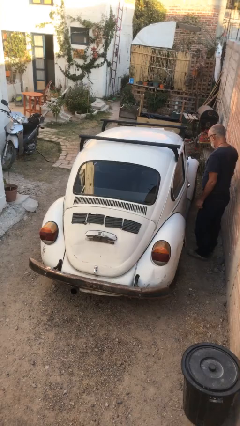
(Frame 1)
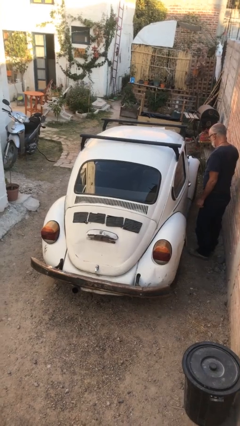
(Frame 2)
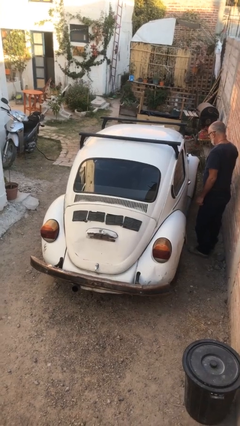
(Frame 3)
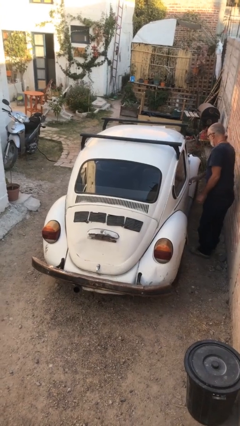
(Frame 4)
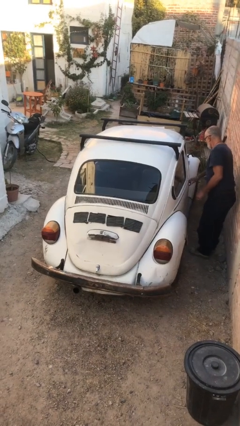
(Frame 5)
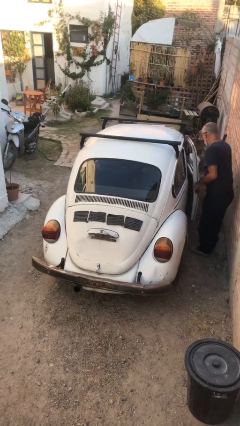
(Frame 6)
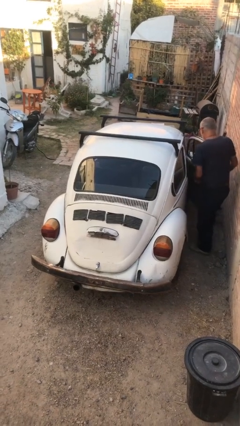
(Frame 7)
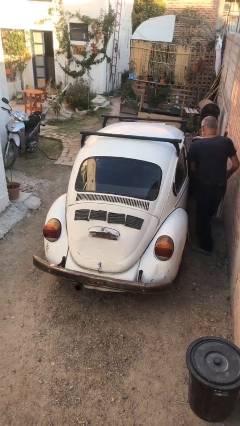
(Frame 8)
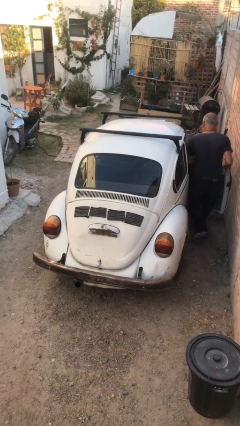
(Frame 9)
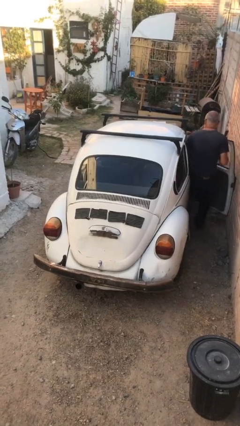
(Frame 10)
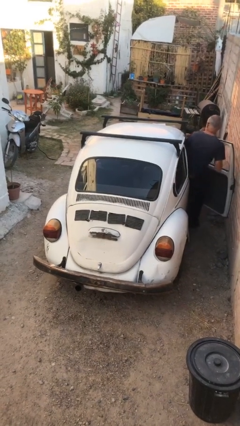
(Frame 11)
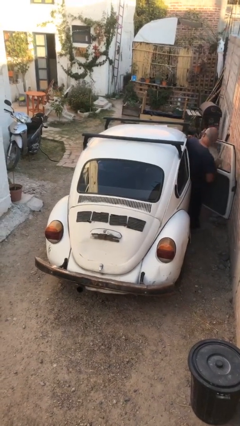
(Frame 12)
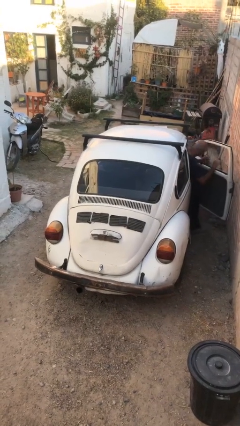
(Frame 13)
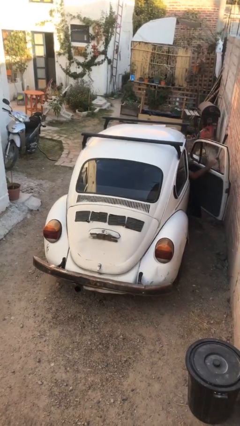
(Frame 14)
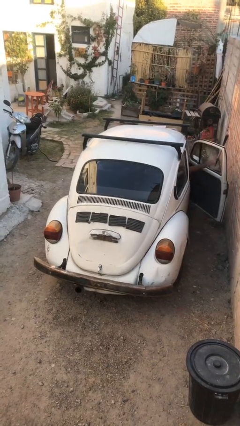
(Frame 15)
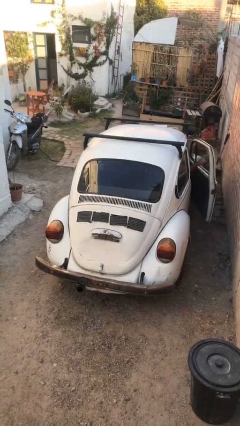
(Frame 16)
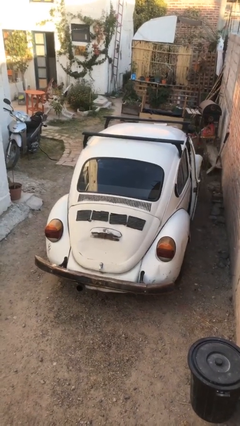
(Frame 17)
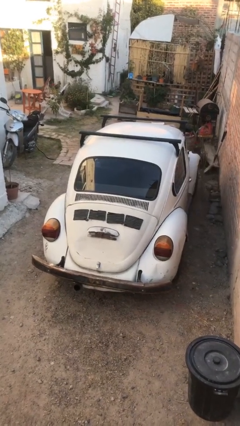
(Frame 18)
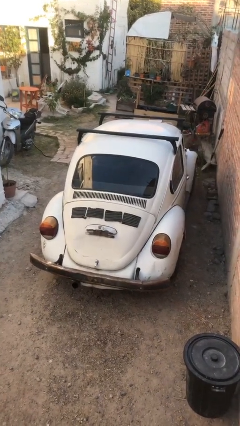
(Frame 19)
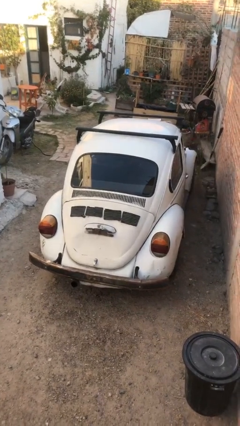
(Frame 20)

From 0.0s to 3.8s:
car picks up person

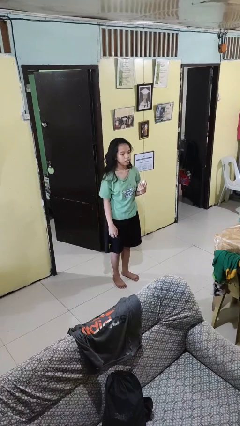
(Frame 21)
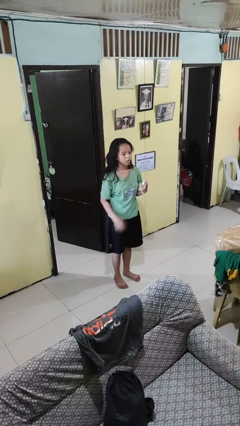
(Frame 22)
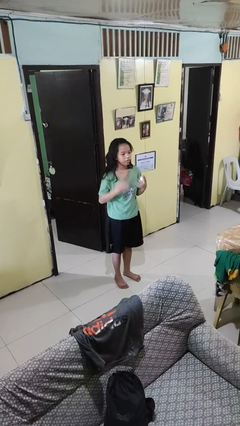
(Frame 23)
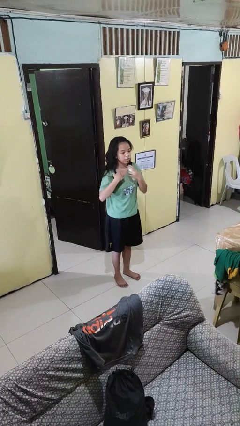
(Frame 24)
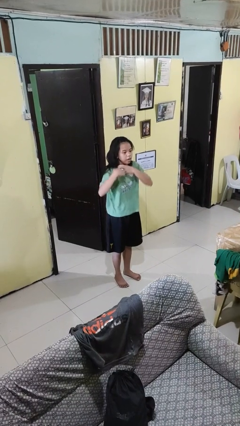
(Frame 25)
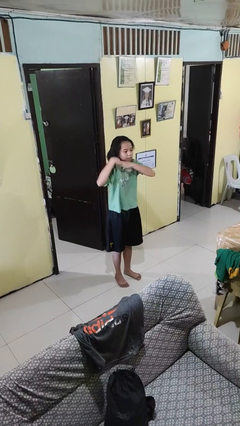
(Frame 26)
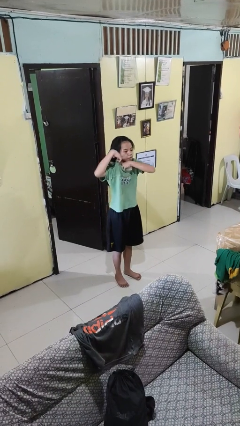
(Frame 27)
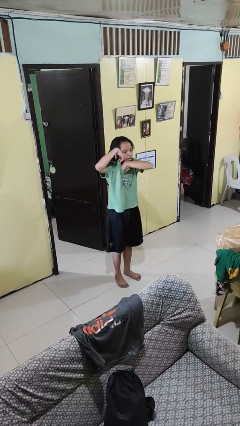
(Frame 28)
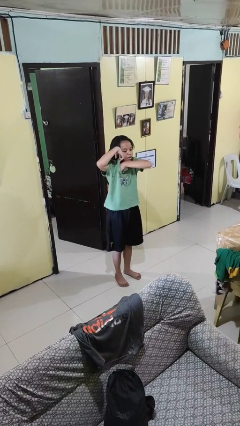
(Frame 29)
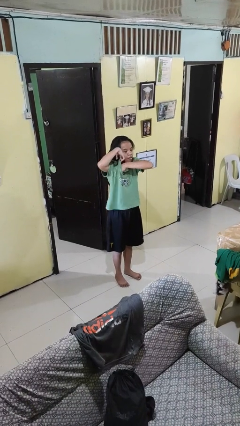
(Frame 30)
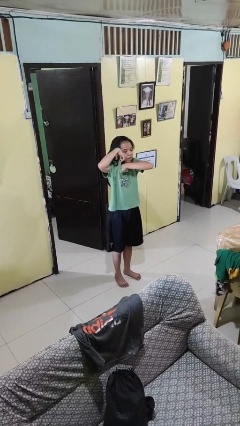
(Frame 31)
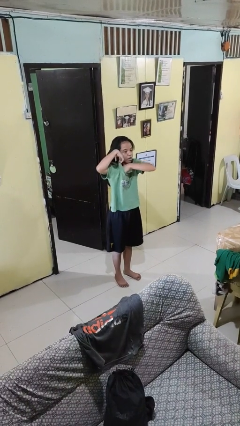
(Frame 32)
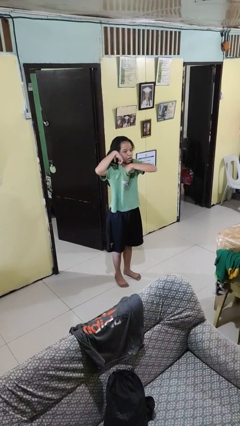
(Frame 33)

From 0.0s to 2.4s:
person applies deodorant

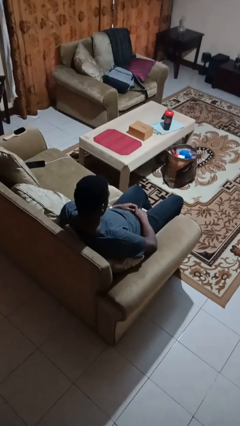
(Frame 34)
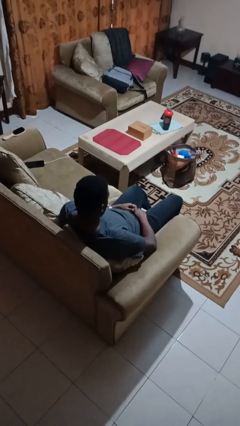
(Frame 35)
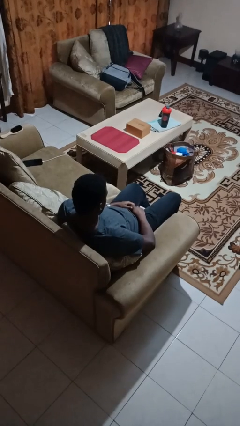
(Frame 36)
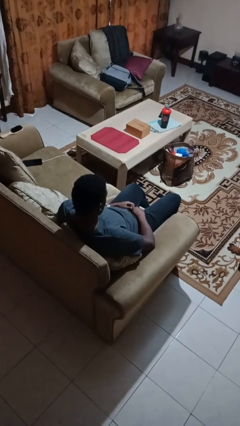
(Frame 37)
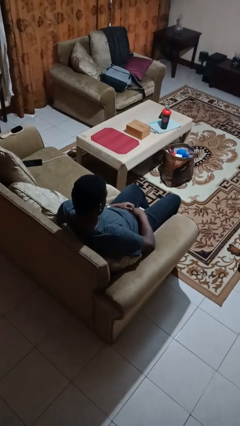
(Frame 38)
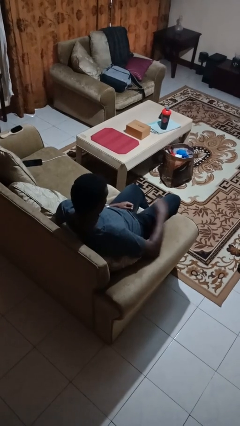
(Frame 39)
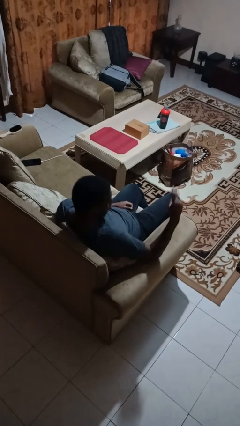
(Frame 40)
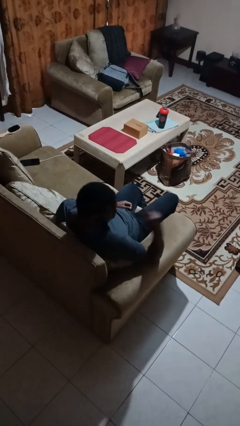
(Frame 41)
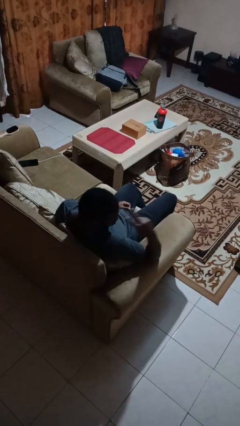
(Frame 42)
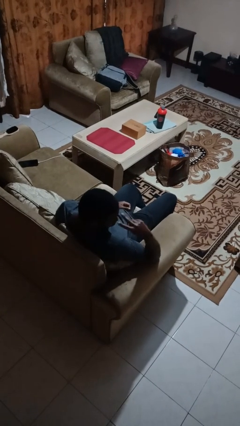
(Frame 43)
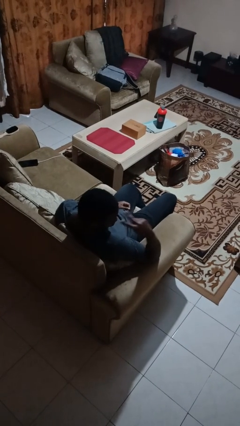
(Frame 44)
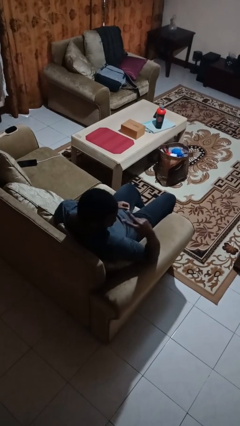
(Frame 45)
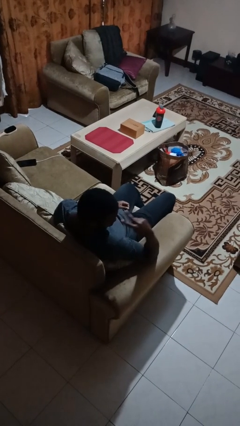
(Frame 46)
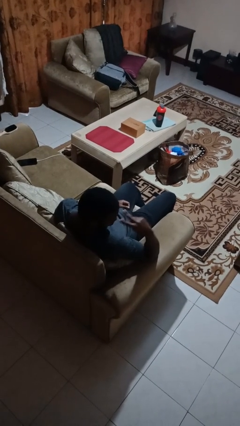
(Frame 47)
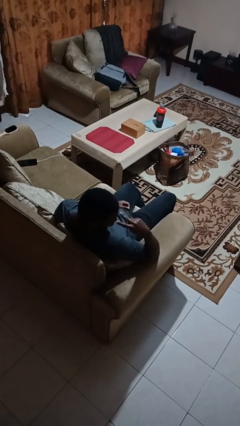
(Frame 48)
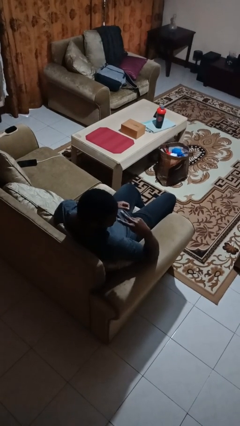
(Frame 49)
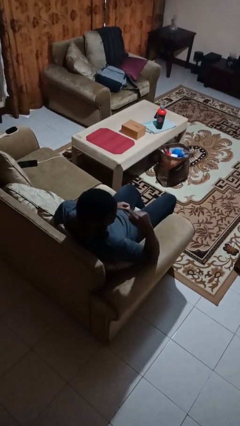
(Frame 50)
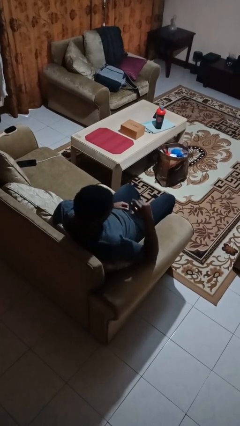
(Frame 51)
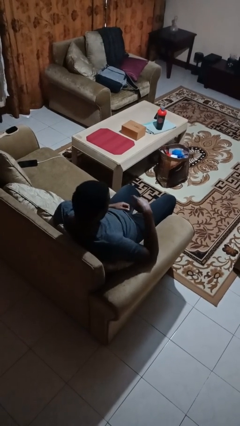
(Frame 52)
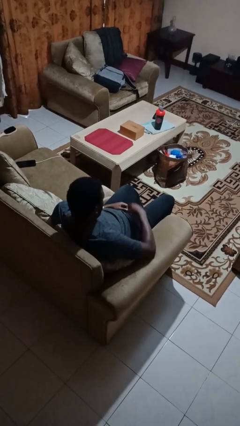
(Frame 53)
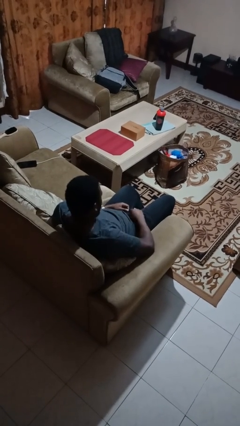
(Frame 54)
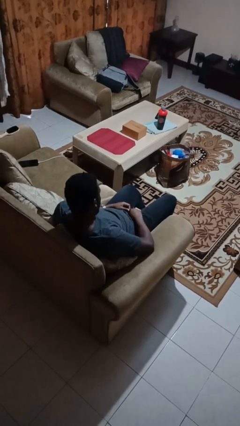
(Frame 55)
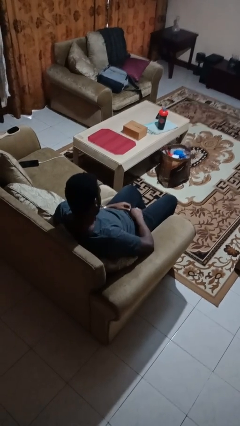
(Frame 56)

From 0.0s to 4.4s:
person gestures watch closely

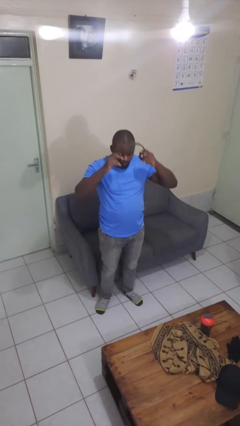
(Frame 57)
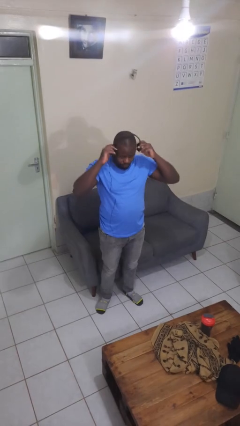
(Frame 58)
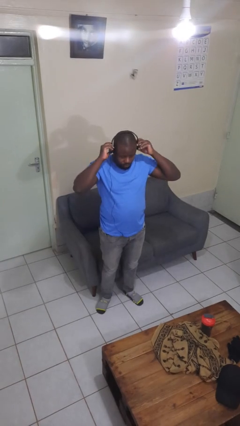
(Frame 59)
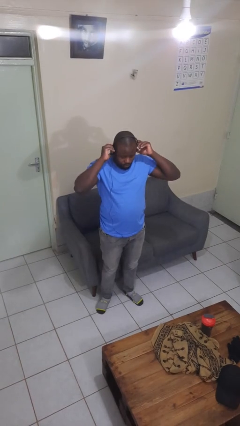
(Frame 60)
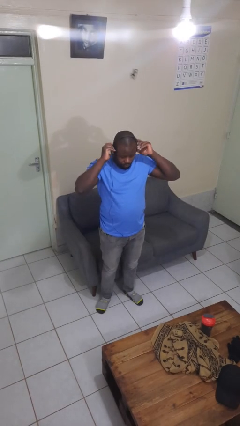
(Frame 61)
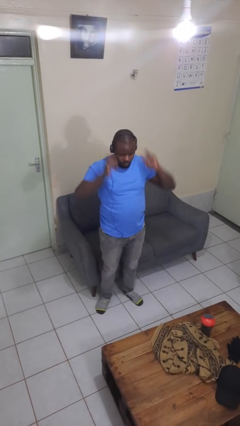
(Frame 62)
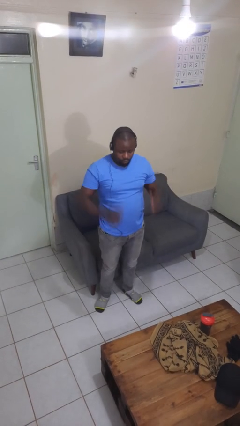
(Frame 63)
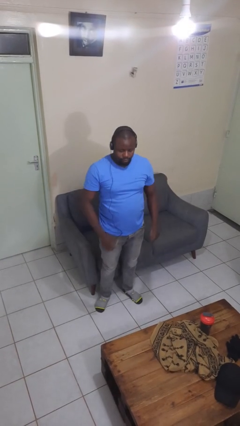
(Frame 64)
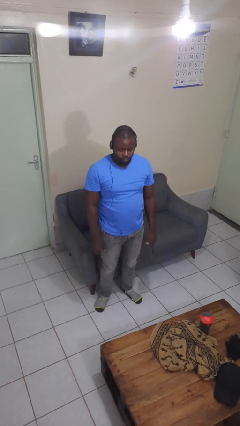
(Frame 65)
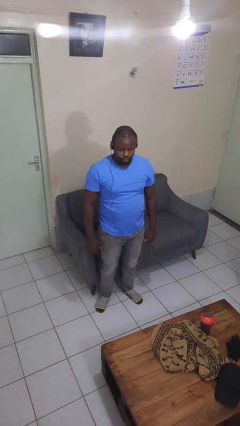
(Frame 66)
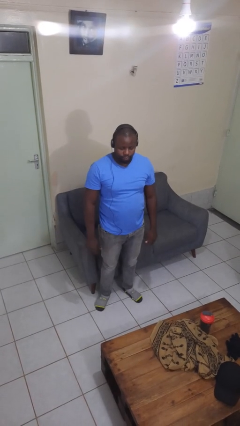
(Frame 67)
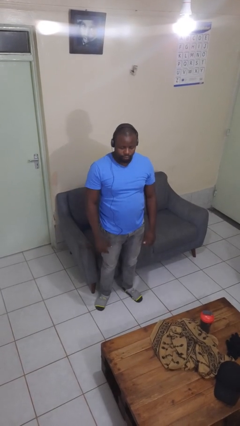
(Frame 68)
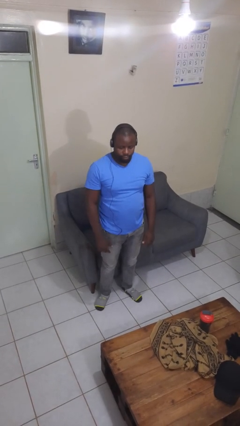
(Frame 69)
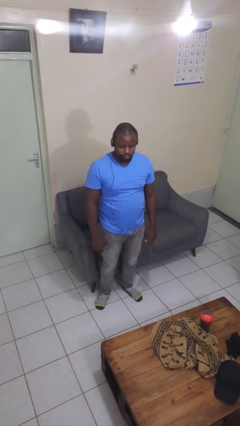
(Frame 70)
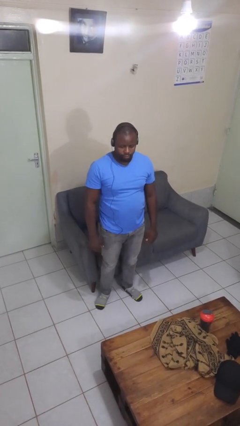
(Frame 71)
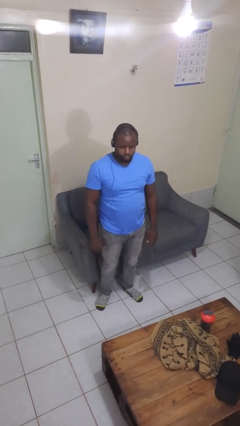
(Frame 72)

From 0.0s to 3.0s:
person puts on headphones

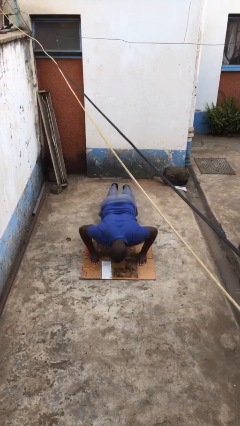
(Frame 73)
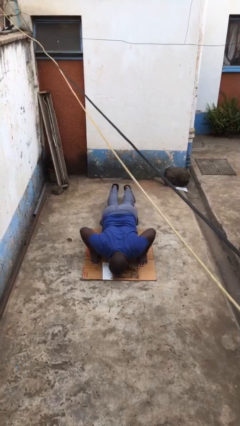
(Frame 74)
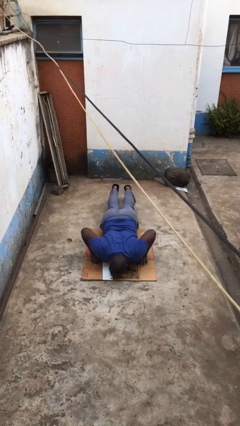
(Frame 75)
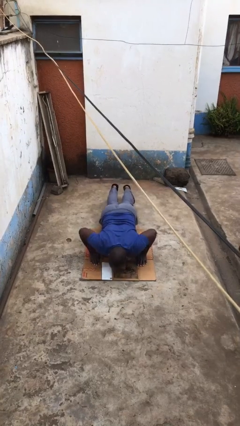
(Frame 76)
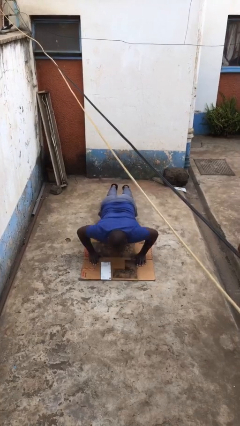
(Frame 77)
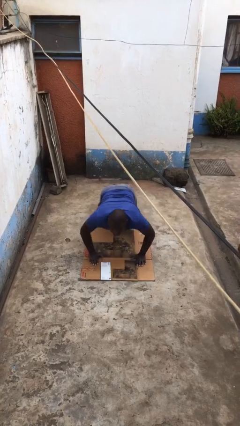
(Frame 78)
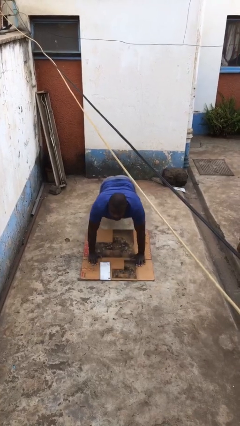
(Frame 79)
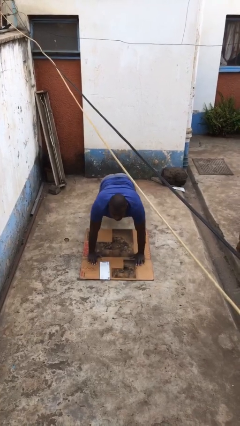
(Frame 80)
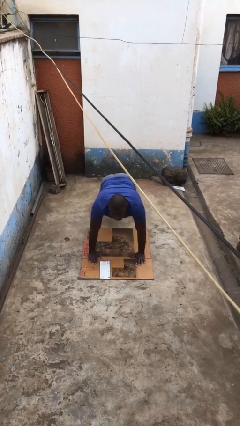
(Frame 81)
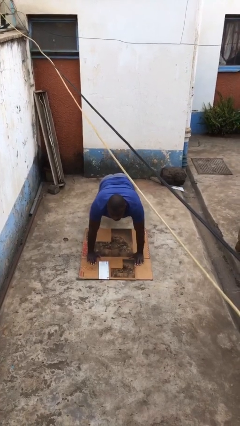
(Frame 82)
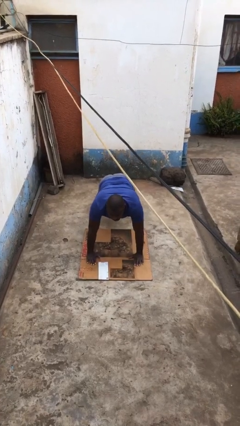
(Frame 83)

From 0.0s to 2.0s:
person exercises with pushup

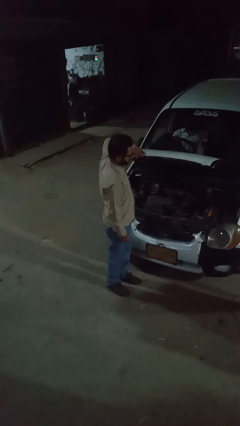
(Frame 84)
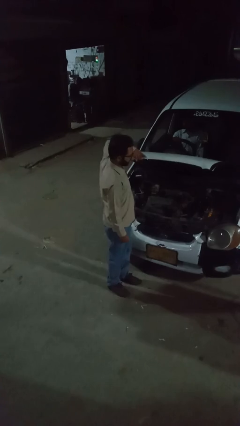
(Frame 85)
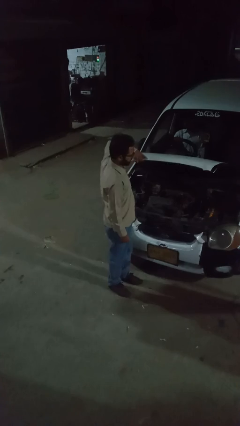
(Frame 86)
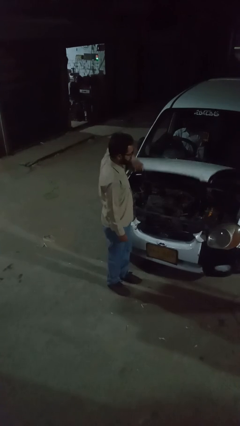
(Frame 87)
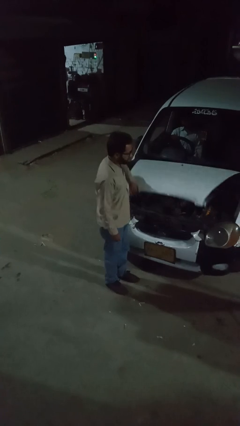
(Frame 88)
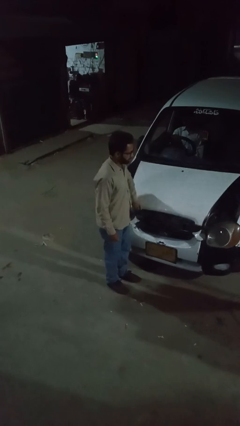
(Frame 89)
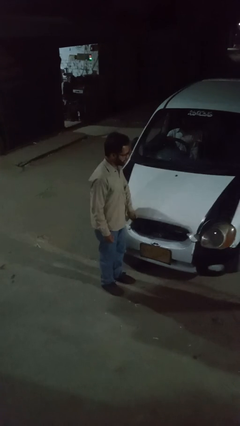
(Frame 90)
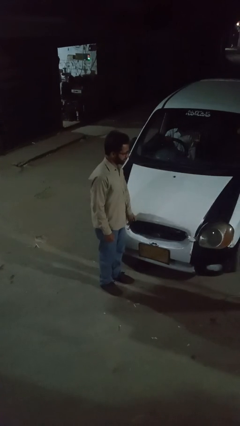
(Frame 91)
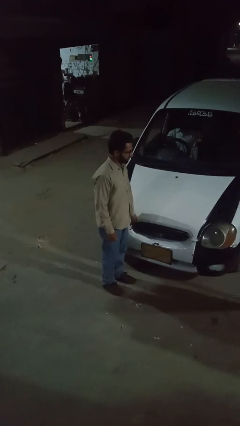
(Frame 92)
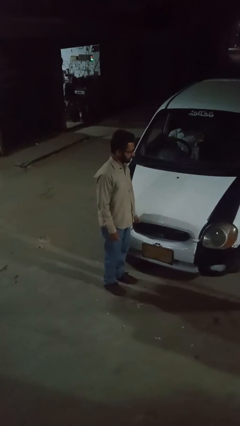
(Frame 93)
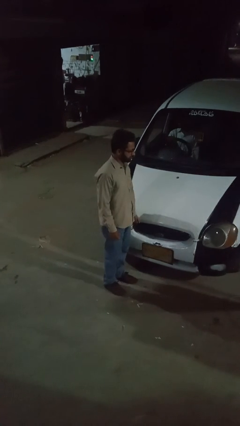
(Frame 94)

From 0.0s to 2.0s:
person closes car hood
